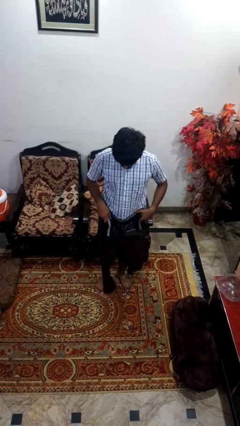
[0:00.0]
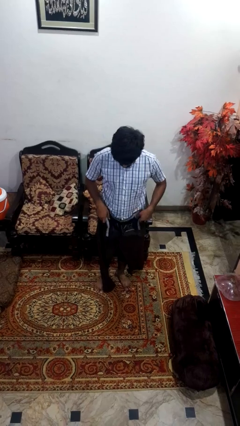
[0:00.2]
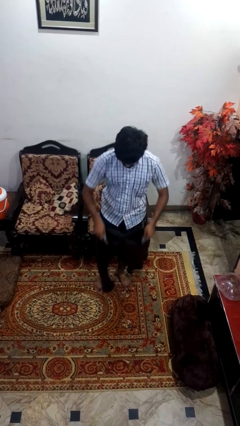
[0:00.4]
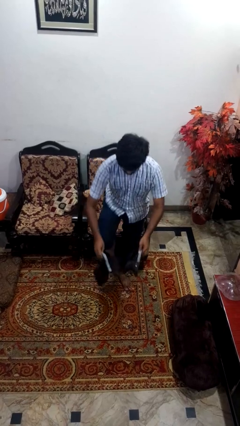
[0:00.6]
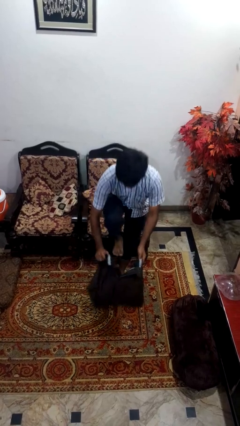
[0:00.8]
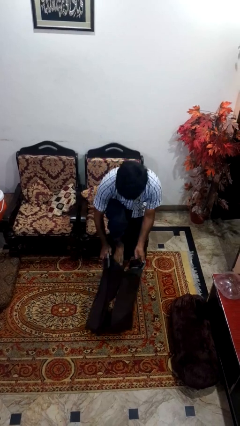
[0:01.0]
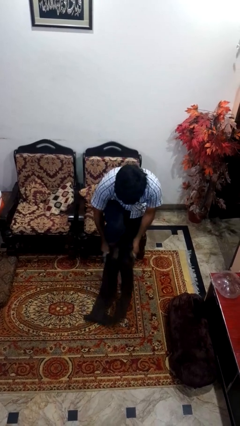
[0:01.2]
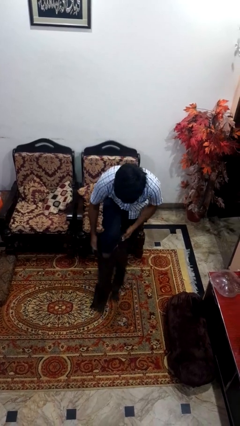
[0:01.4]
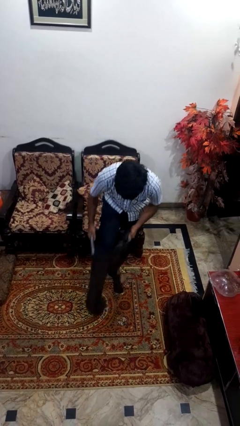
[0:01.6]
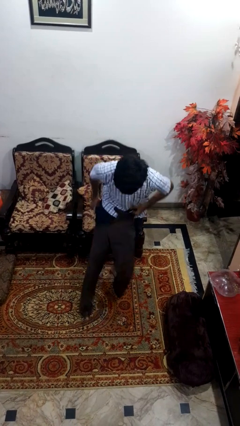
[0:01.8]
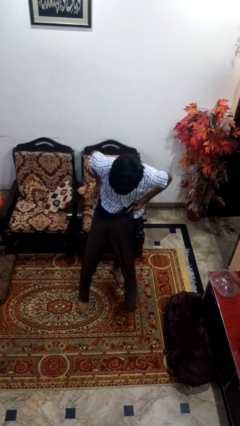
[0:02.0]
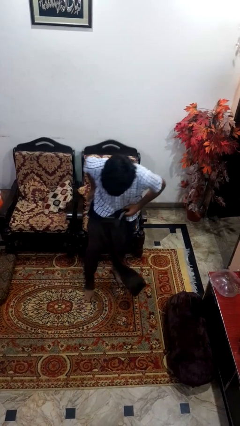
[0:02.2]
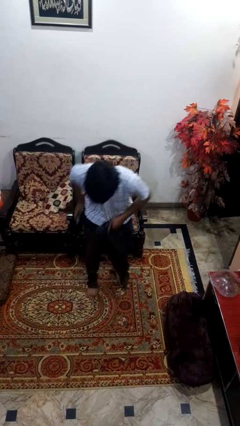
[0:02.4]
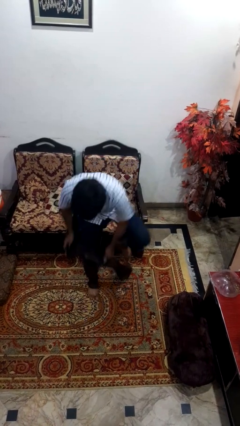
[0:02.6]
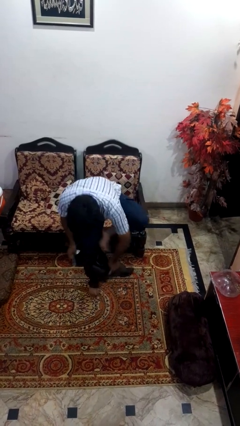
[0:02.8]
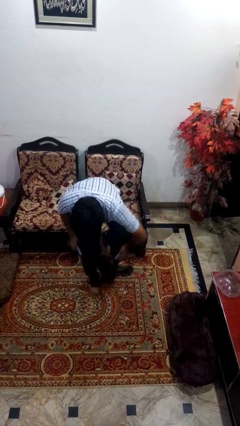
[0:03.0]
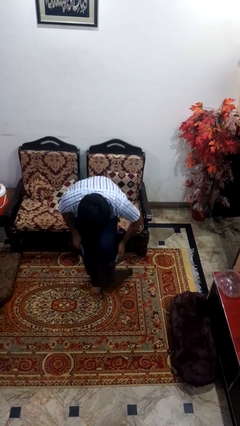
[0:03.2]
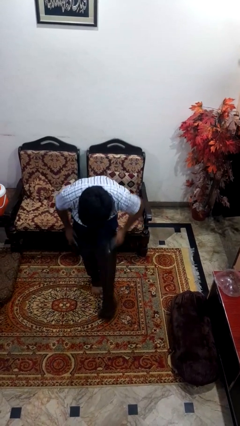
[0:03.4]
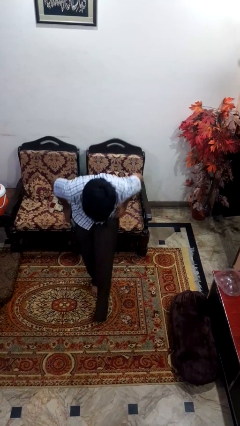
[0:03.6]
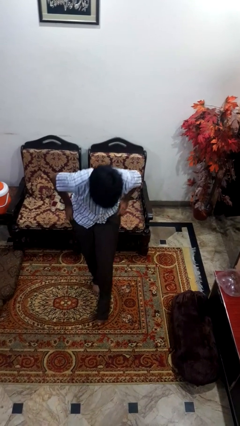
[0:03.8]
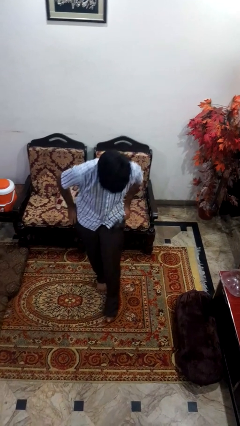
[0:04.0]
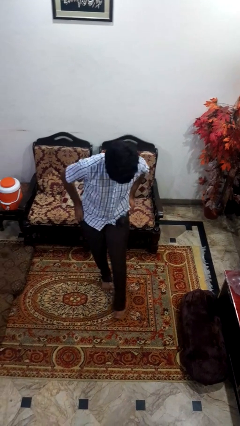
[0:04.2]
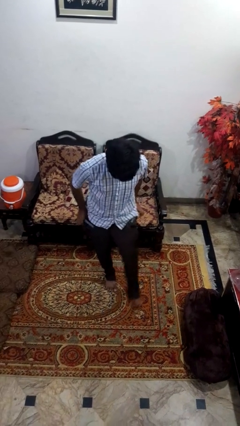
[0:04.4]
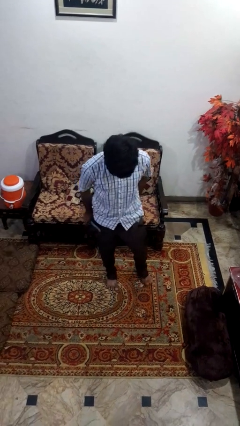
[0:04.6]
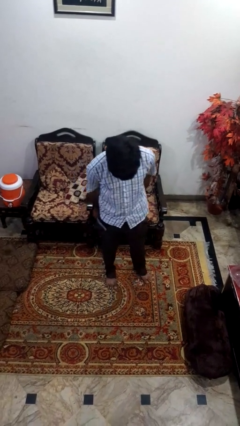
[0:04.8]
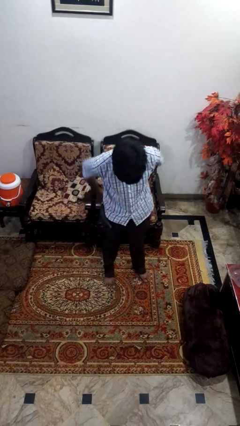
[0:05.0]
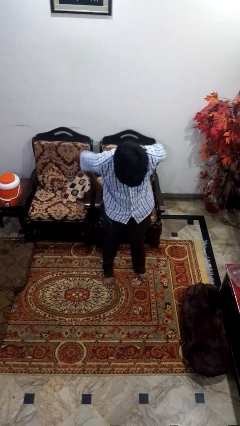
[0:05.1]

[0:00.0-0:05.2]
person puts on pants

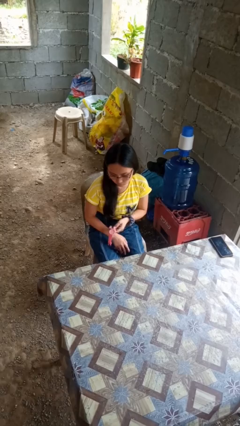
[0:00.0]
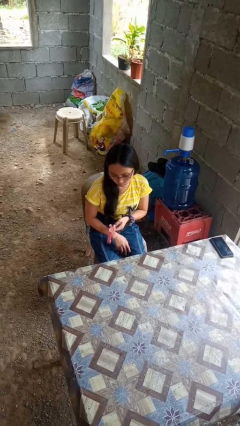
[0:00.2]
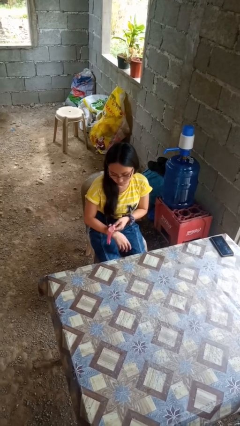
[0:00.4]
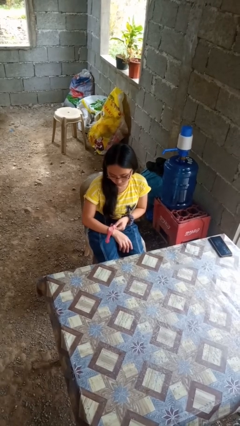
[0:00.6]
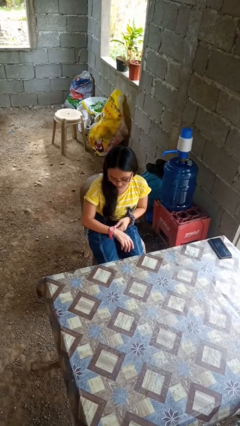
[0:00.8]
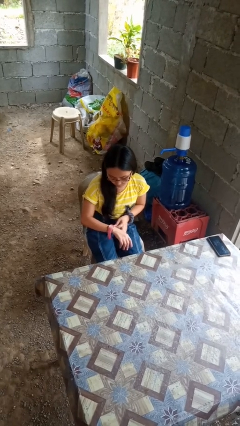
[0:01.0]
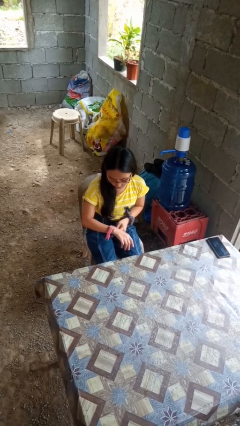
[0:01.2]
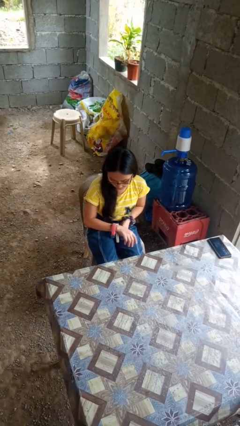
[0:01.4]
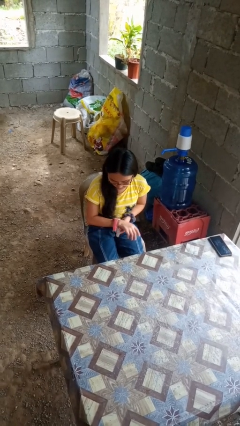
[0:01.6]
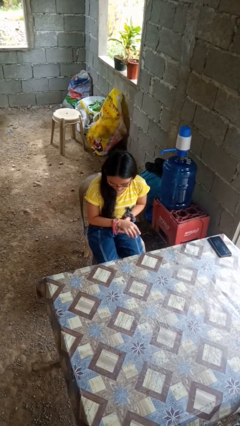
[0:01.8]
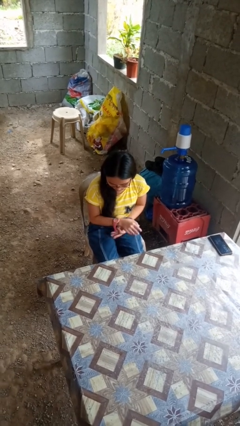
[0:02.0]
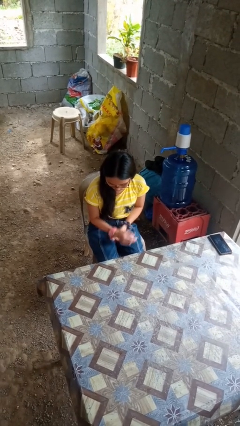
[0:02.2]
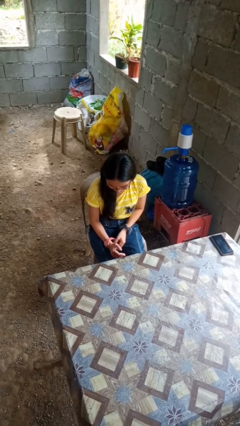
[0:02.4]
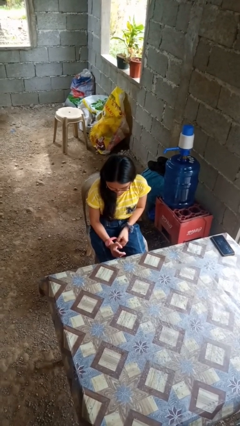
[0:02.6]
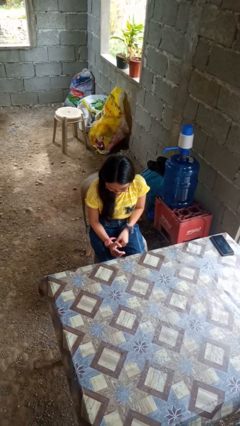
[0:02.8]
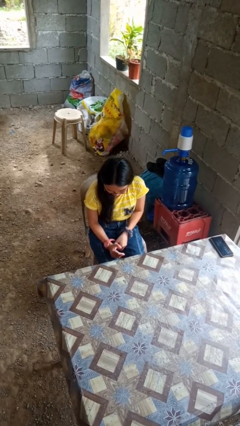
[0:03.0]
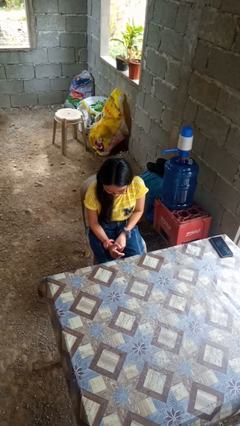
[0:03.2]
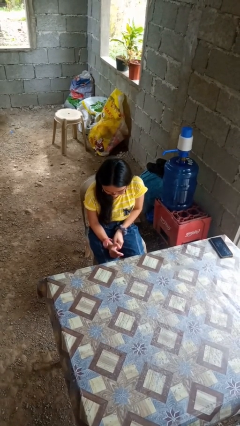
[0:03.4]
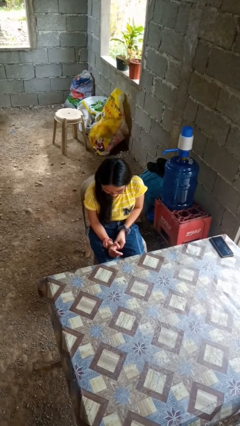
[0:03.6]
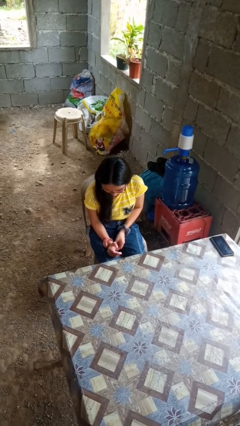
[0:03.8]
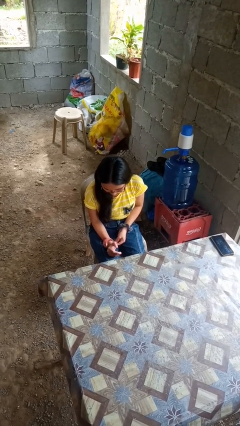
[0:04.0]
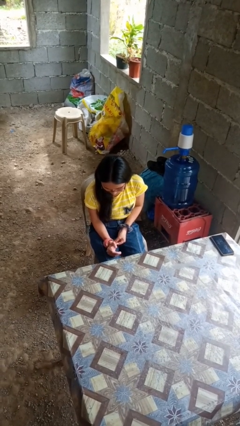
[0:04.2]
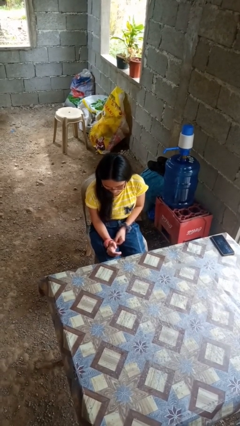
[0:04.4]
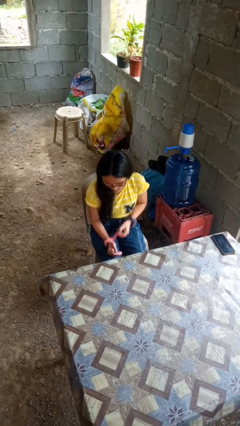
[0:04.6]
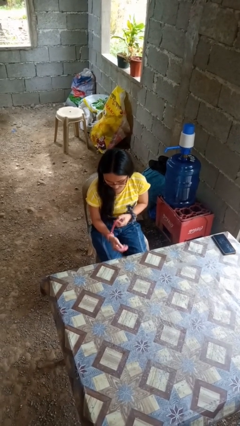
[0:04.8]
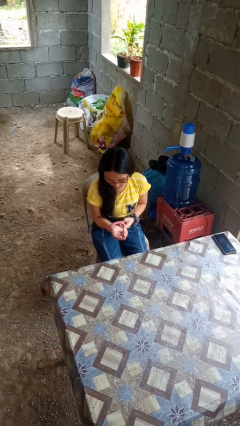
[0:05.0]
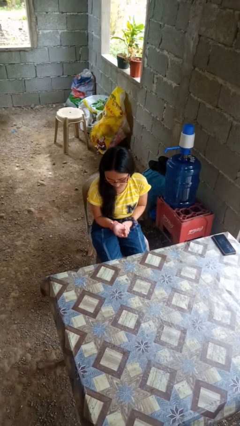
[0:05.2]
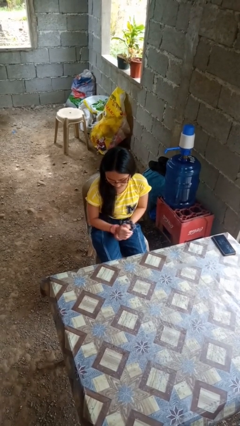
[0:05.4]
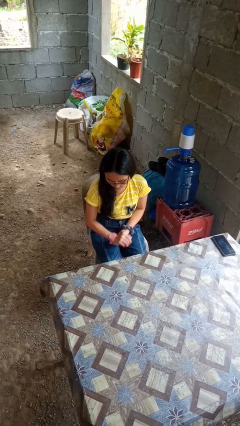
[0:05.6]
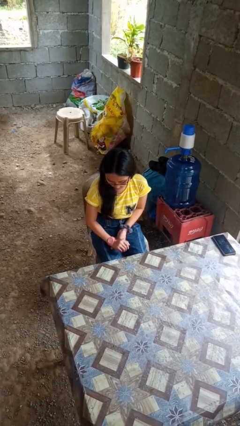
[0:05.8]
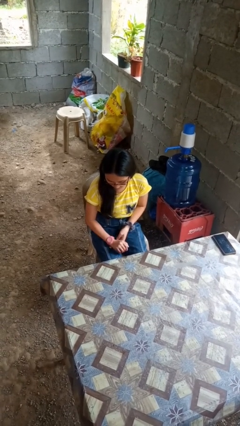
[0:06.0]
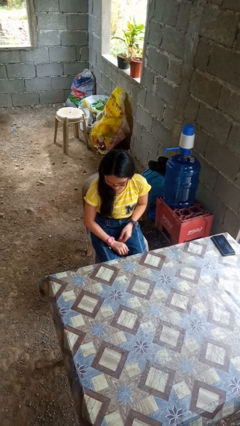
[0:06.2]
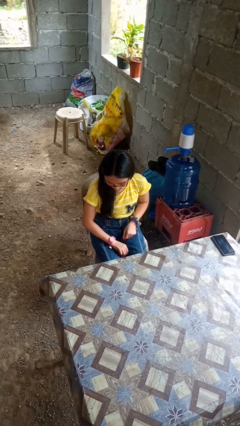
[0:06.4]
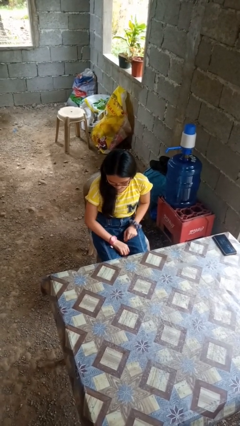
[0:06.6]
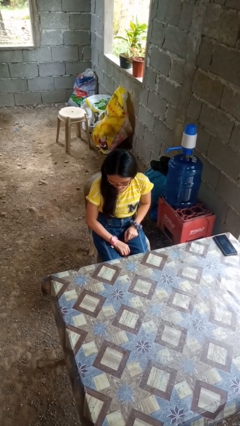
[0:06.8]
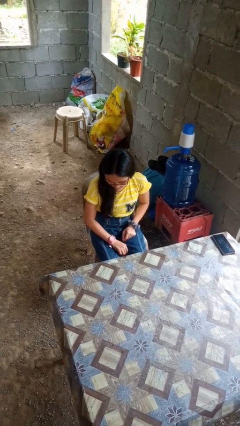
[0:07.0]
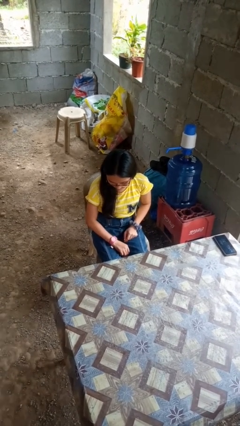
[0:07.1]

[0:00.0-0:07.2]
person puts on wristwatch

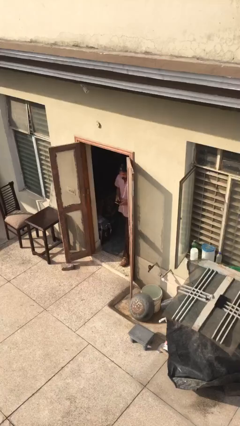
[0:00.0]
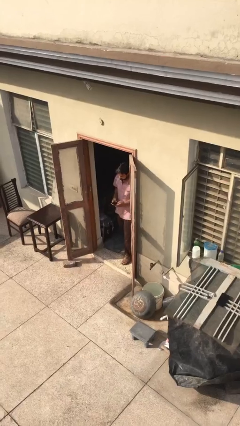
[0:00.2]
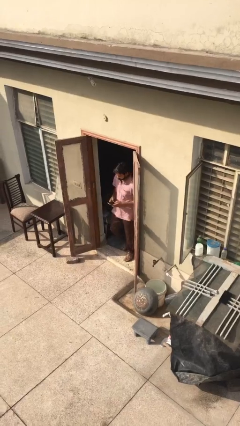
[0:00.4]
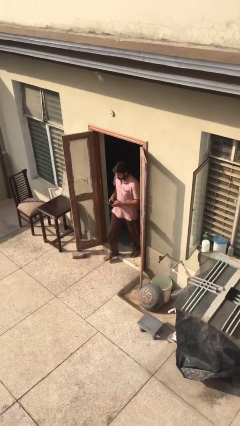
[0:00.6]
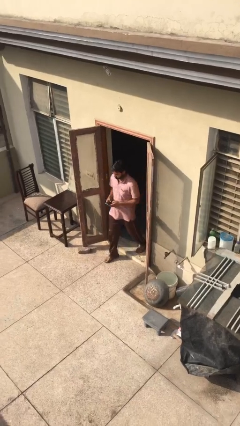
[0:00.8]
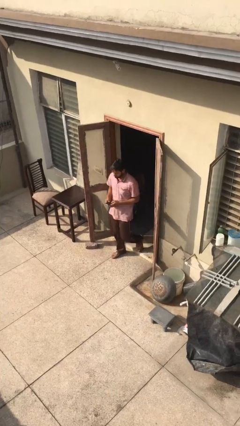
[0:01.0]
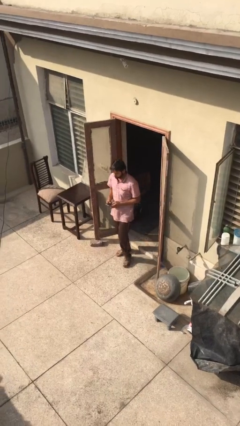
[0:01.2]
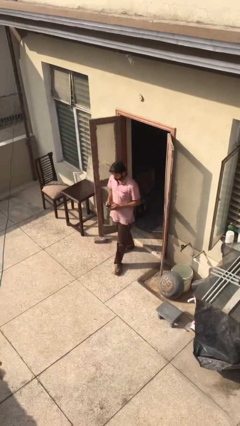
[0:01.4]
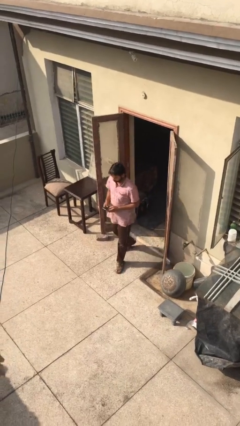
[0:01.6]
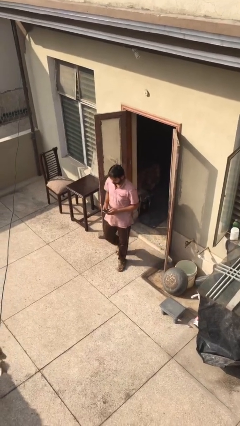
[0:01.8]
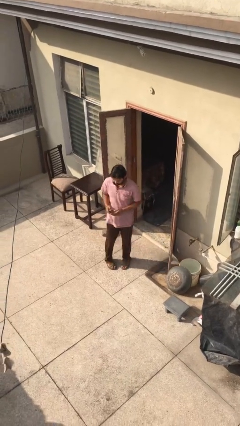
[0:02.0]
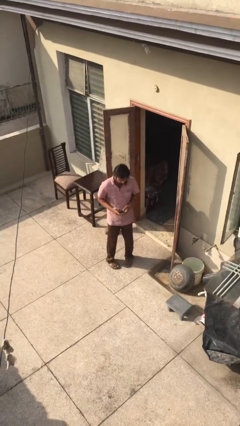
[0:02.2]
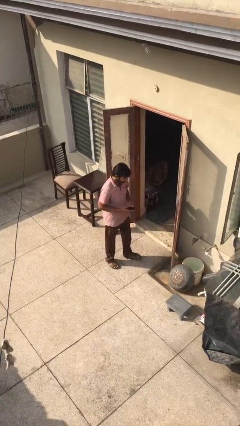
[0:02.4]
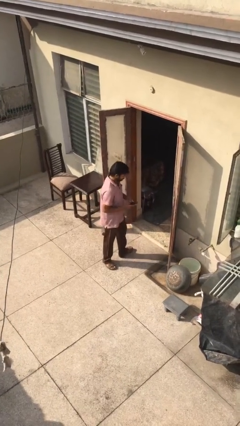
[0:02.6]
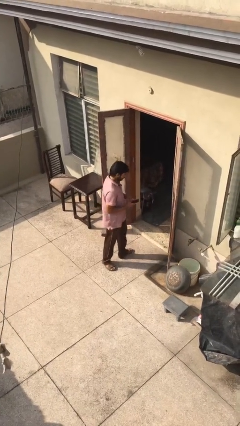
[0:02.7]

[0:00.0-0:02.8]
person enters scene through structure

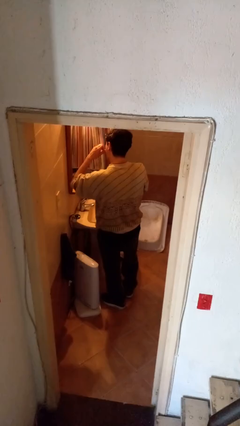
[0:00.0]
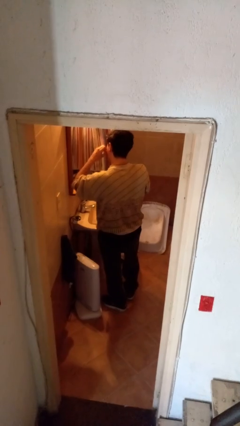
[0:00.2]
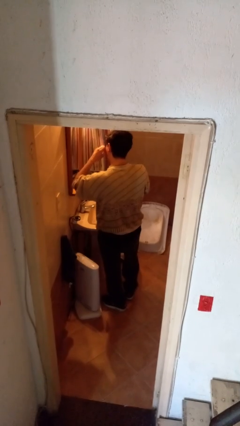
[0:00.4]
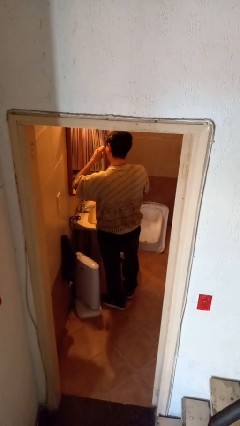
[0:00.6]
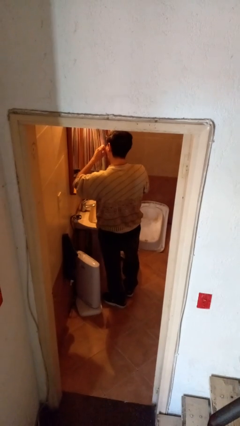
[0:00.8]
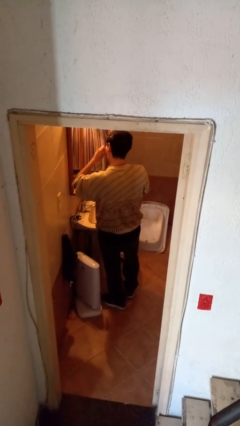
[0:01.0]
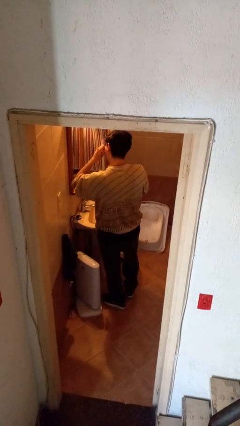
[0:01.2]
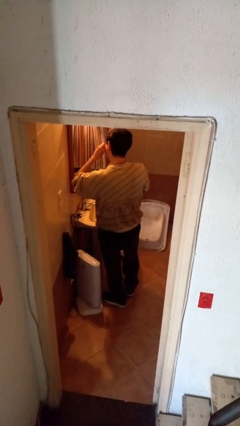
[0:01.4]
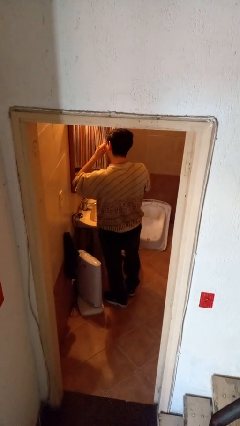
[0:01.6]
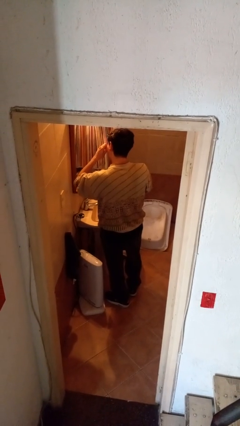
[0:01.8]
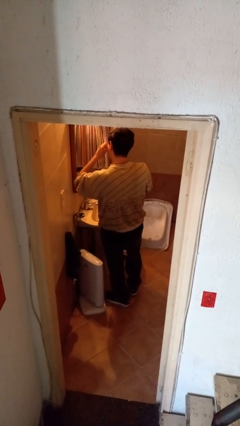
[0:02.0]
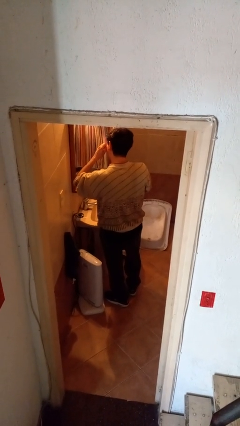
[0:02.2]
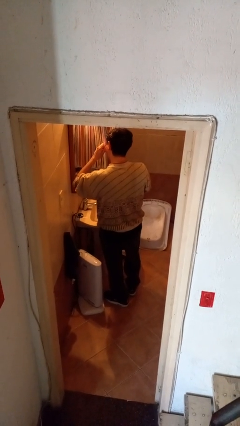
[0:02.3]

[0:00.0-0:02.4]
person flosses

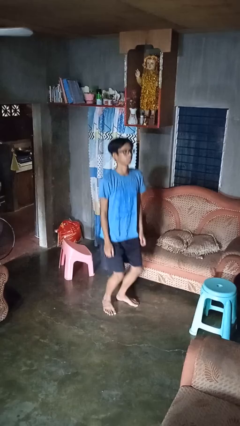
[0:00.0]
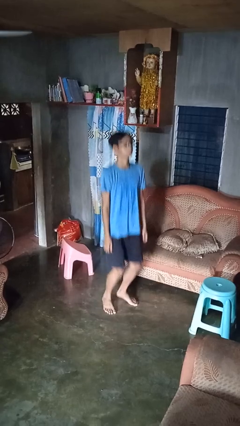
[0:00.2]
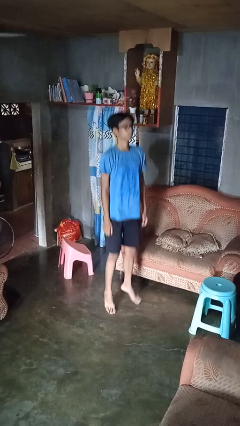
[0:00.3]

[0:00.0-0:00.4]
person jumps
